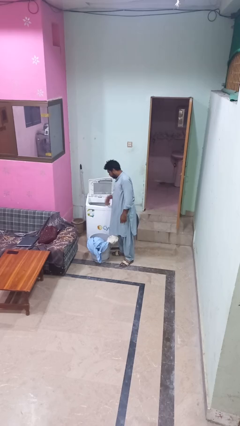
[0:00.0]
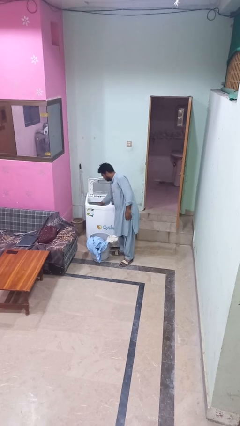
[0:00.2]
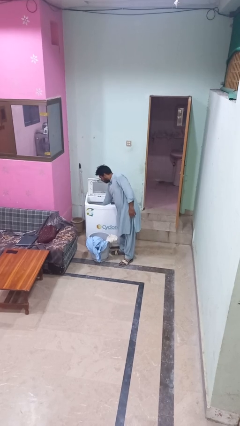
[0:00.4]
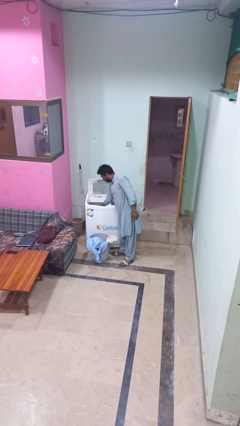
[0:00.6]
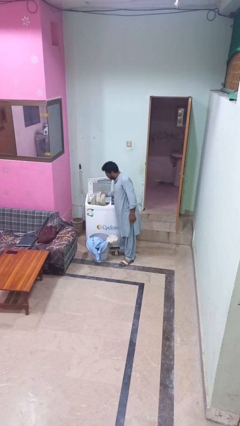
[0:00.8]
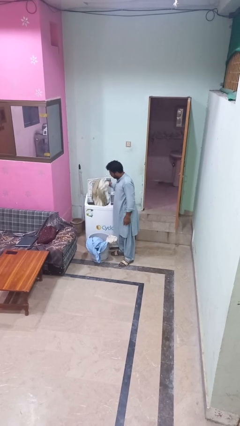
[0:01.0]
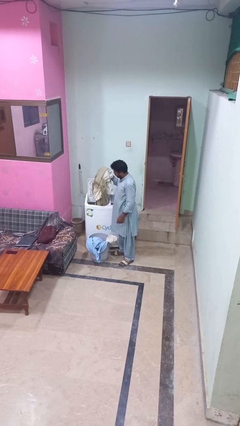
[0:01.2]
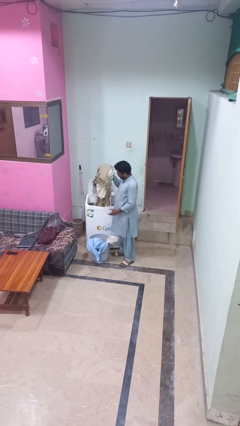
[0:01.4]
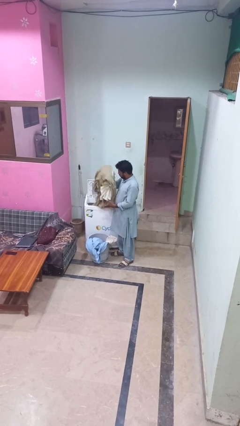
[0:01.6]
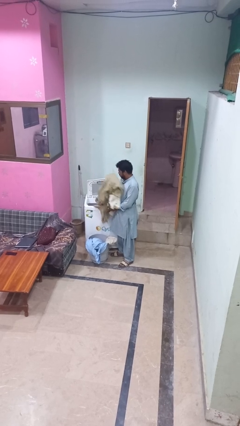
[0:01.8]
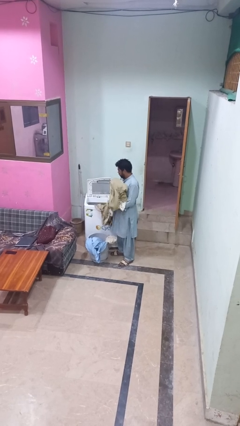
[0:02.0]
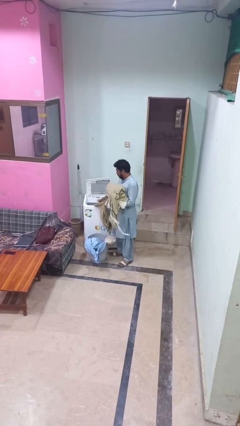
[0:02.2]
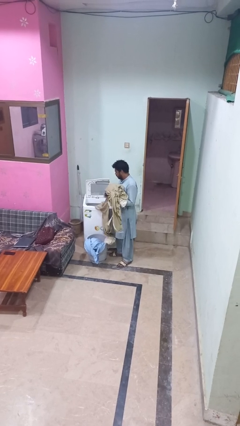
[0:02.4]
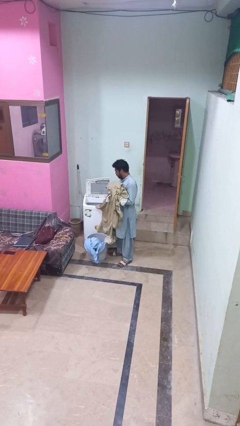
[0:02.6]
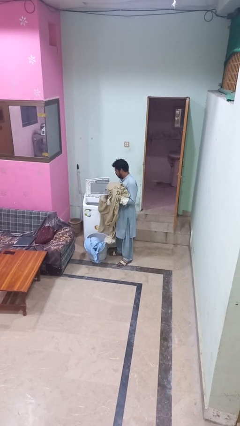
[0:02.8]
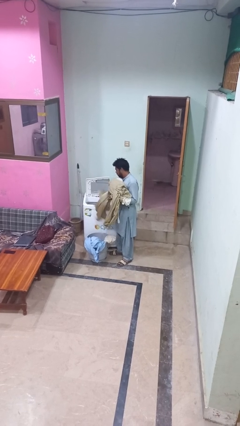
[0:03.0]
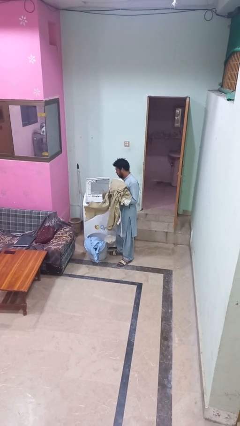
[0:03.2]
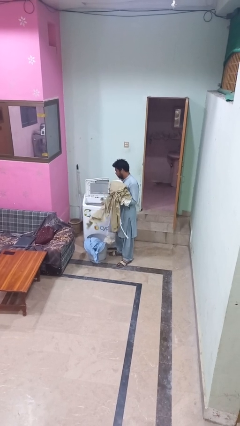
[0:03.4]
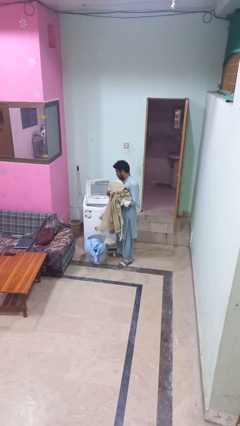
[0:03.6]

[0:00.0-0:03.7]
person unloads clotheswasher

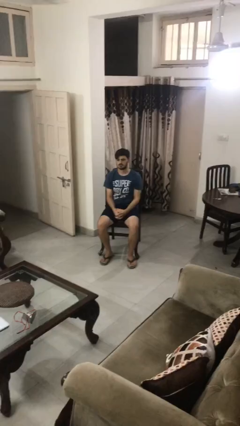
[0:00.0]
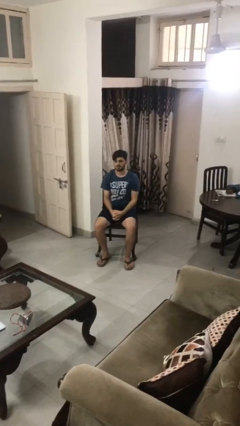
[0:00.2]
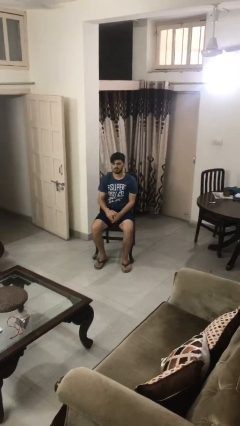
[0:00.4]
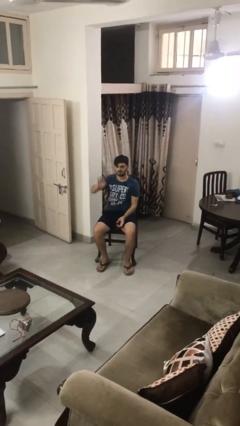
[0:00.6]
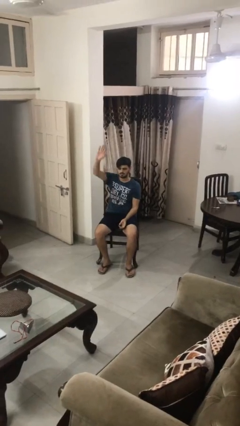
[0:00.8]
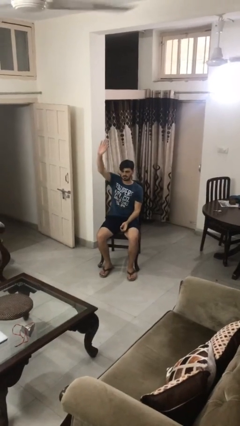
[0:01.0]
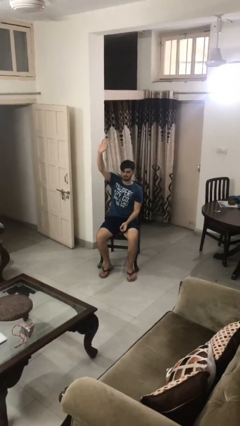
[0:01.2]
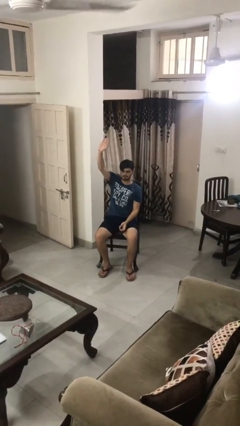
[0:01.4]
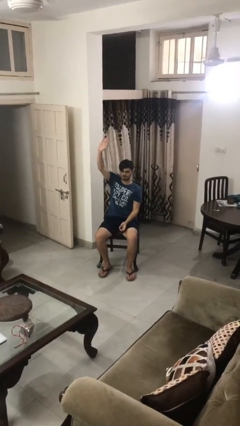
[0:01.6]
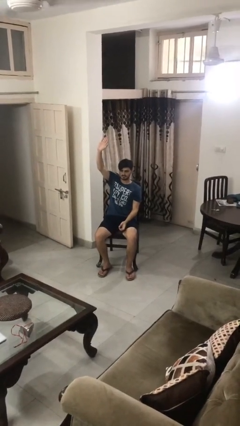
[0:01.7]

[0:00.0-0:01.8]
person gestures raise hand

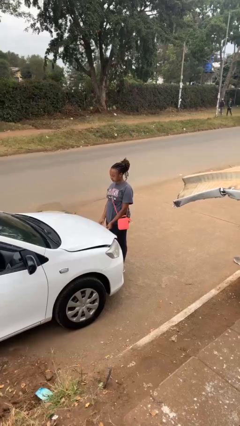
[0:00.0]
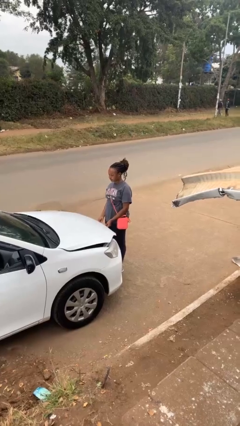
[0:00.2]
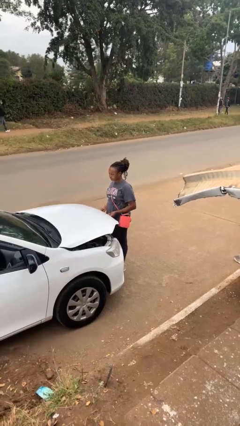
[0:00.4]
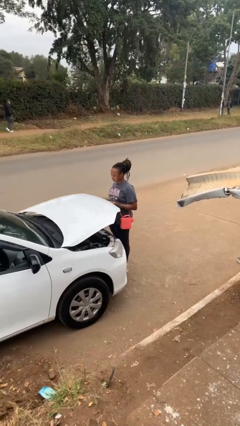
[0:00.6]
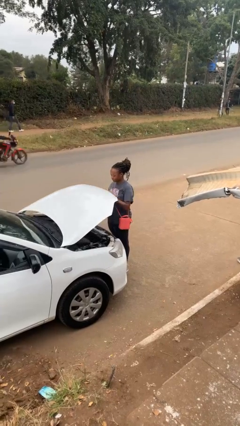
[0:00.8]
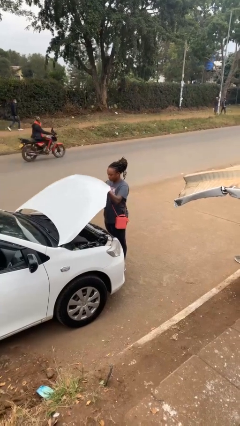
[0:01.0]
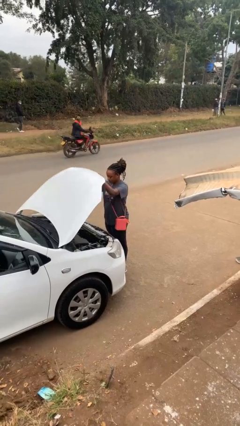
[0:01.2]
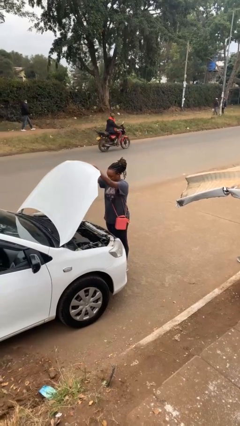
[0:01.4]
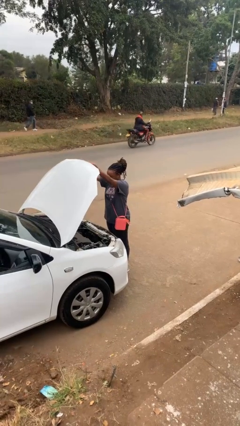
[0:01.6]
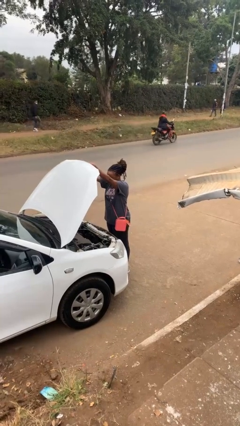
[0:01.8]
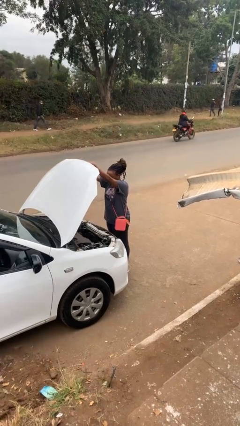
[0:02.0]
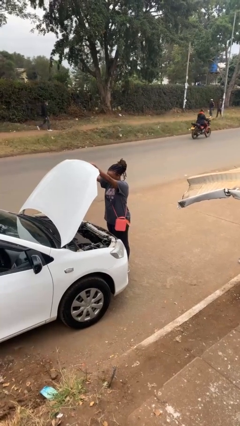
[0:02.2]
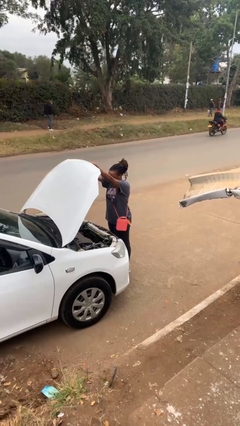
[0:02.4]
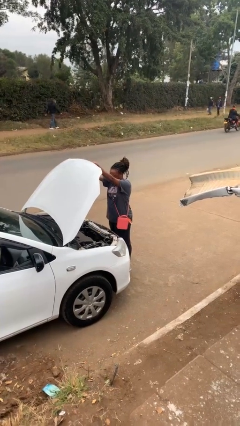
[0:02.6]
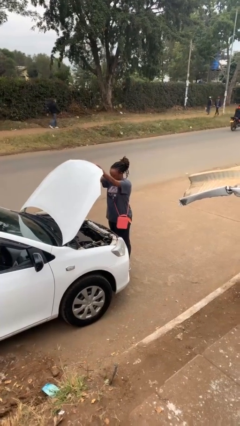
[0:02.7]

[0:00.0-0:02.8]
person opens car hood

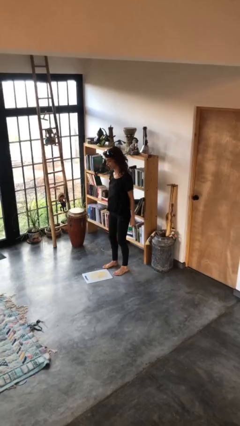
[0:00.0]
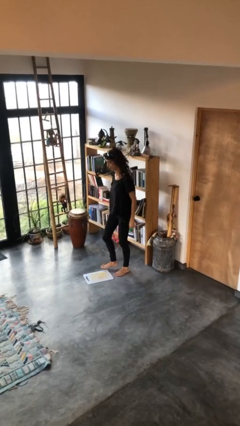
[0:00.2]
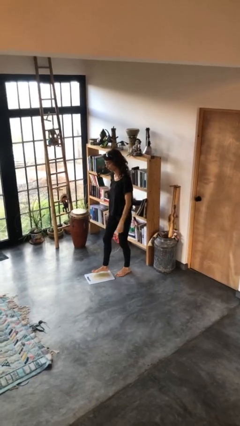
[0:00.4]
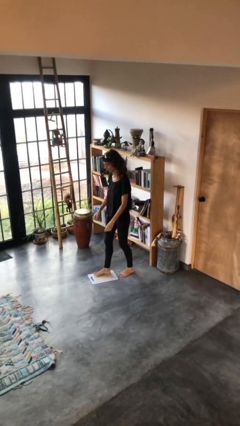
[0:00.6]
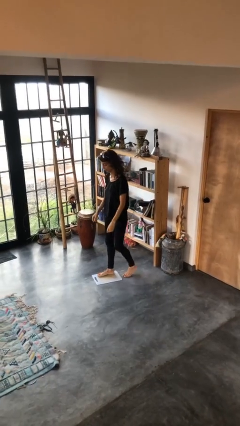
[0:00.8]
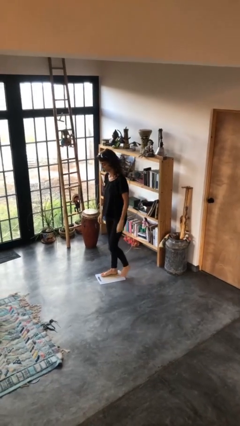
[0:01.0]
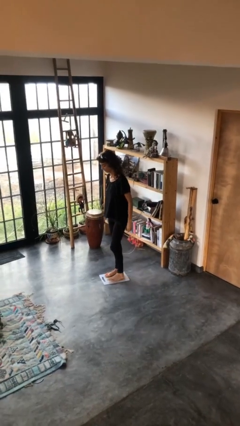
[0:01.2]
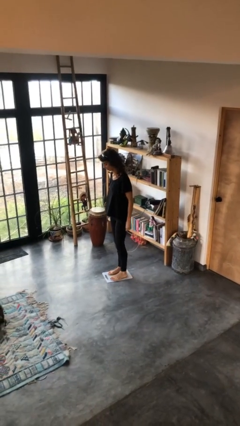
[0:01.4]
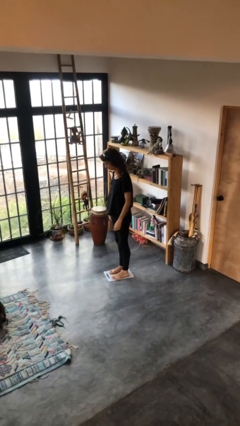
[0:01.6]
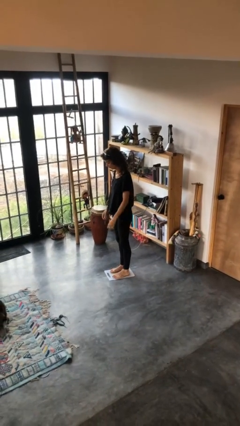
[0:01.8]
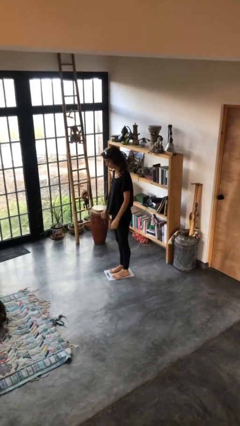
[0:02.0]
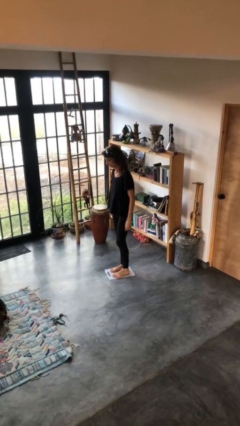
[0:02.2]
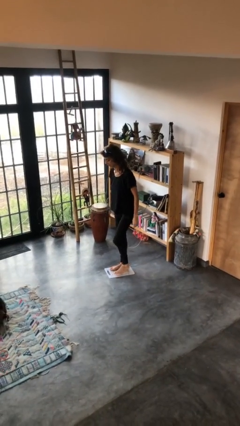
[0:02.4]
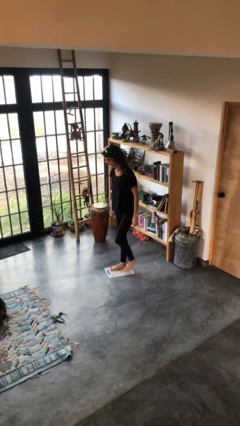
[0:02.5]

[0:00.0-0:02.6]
person uses bodyweight scale

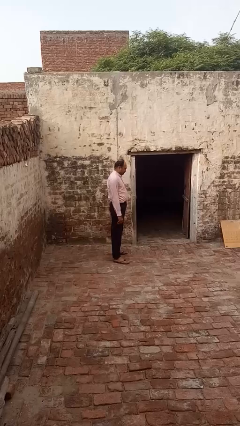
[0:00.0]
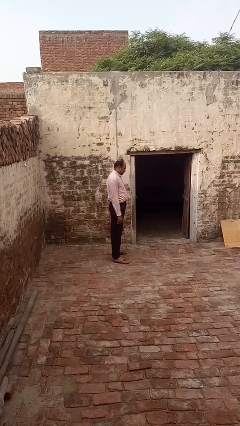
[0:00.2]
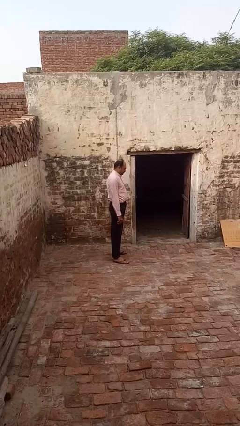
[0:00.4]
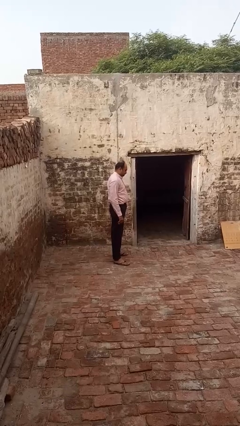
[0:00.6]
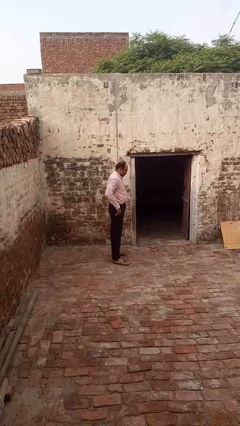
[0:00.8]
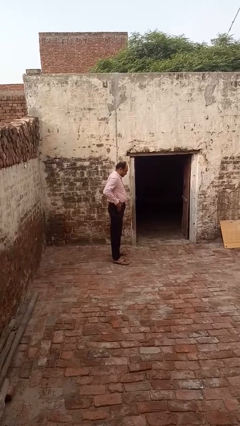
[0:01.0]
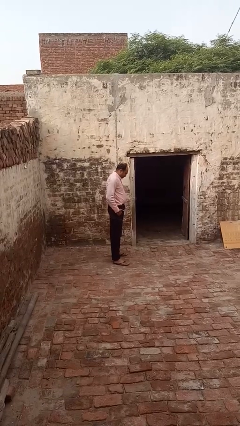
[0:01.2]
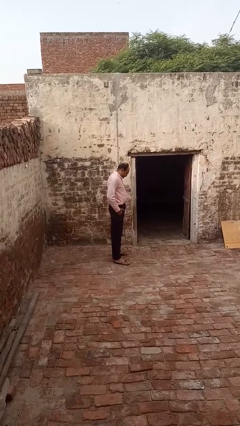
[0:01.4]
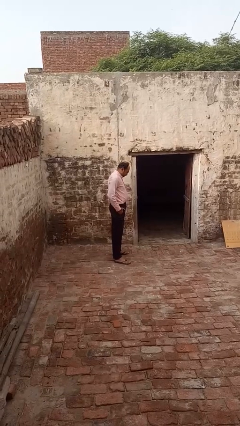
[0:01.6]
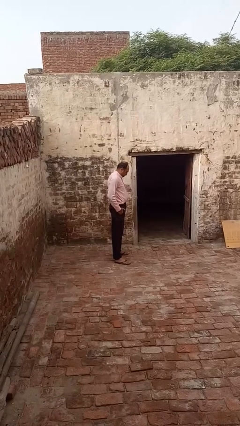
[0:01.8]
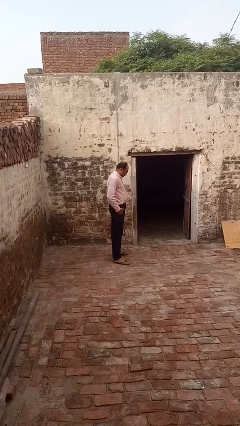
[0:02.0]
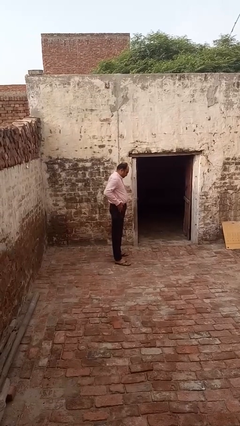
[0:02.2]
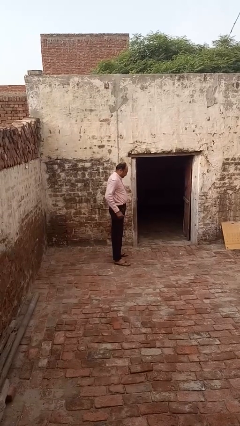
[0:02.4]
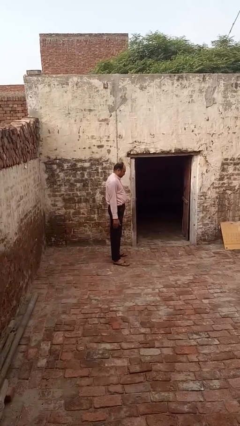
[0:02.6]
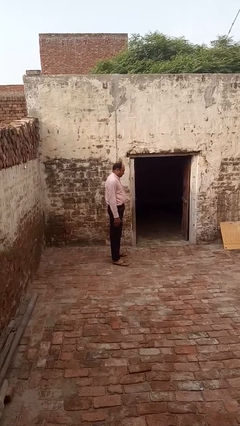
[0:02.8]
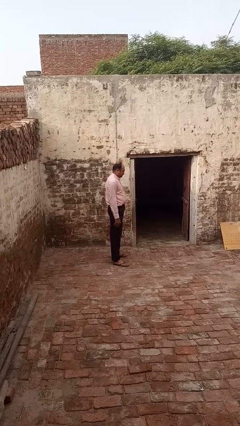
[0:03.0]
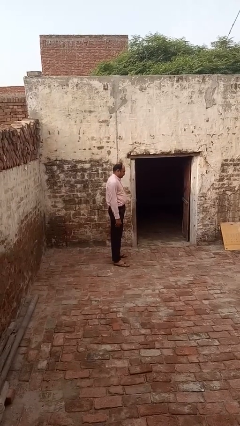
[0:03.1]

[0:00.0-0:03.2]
person puts hands in back pockets

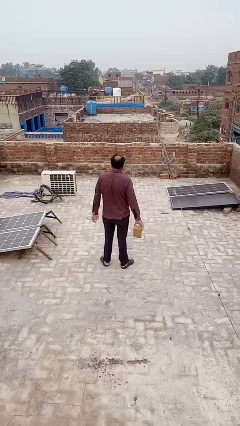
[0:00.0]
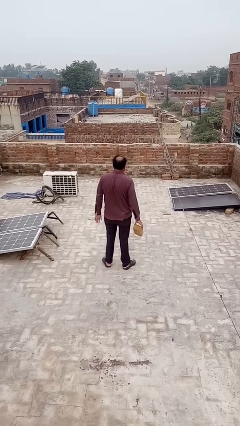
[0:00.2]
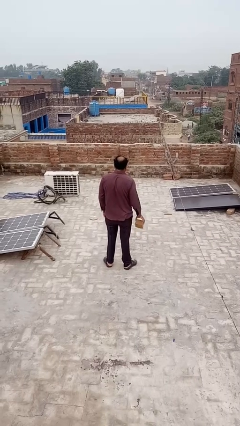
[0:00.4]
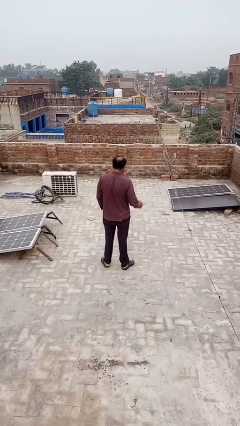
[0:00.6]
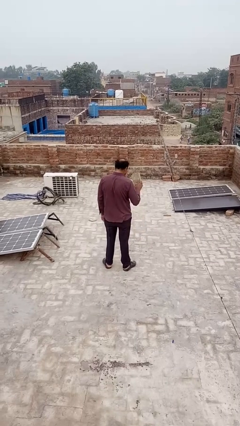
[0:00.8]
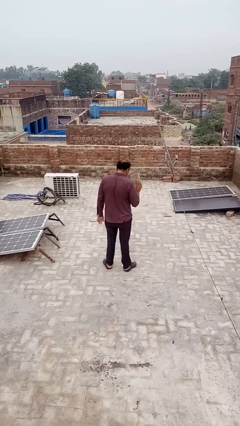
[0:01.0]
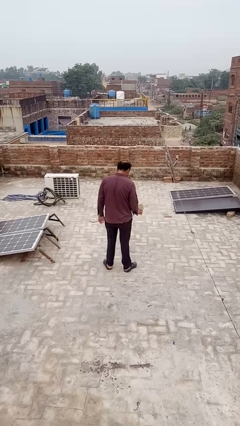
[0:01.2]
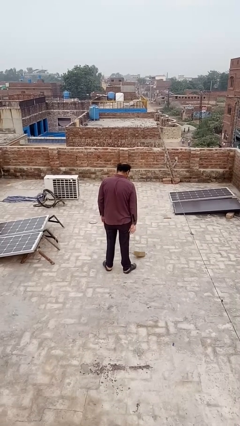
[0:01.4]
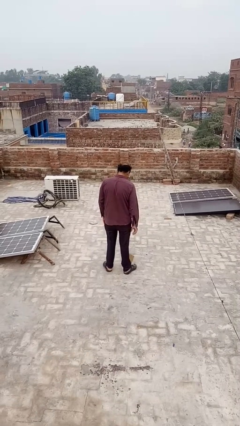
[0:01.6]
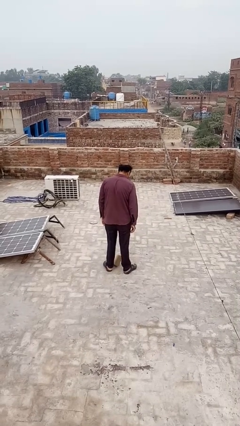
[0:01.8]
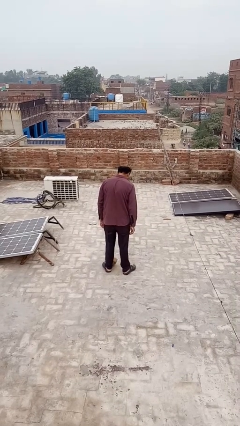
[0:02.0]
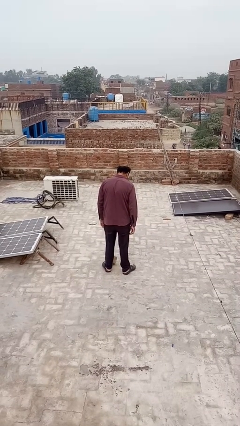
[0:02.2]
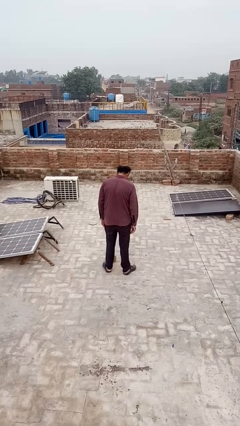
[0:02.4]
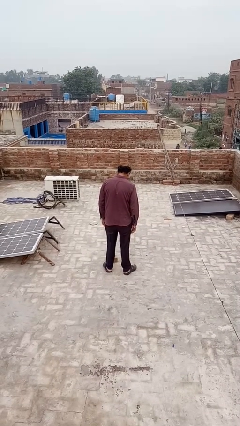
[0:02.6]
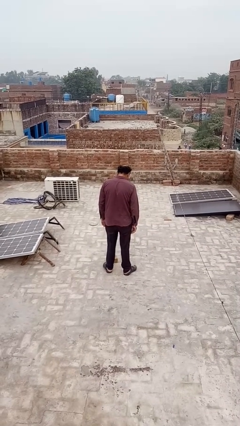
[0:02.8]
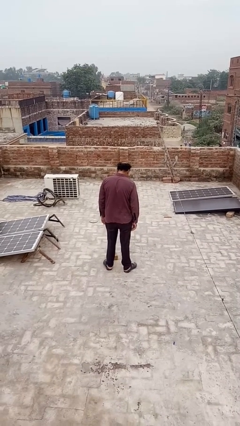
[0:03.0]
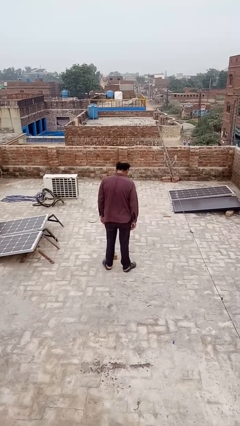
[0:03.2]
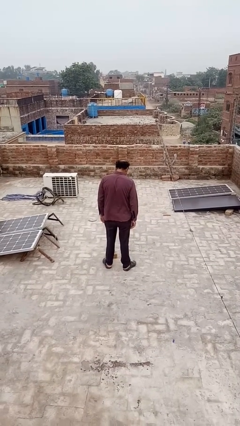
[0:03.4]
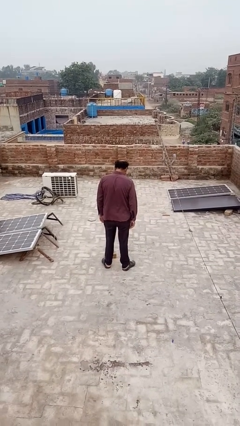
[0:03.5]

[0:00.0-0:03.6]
person throws object to ground

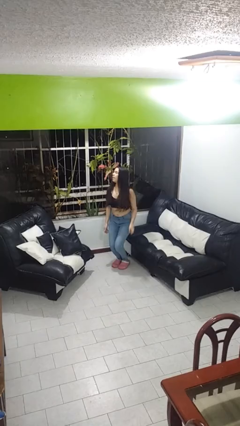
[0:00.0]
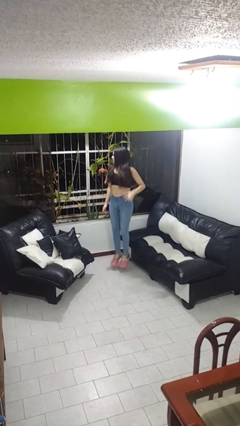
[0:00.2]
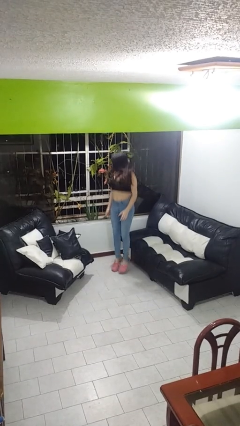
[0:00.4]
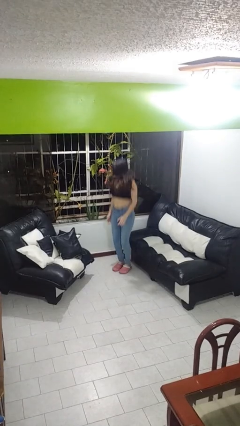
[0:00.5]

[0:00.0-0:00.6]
person jumps
